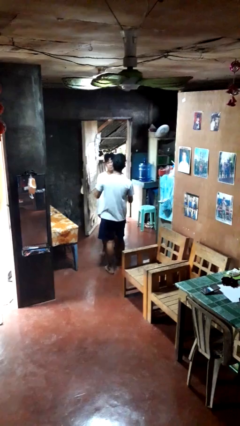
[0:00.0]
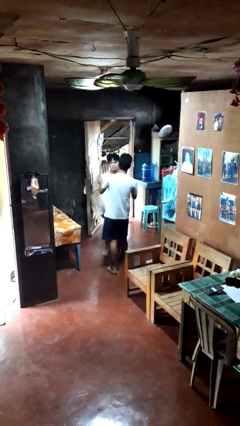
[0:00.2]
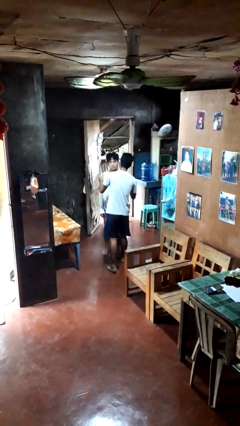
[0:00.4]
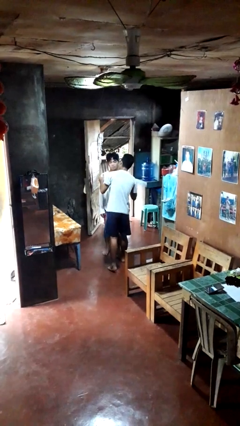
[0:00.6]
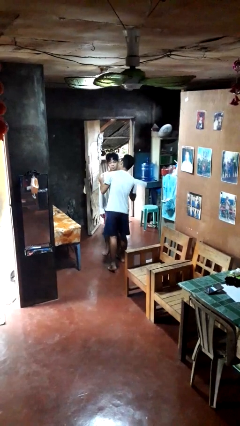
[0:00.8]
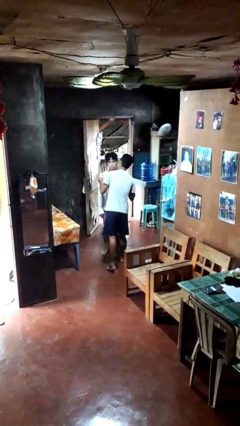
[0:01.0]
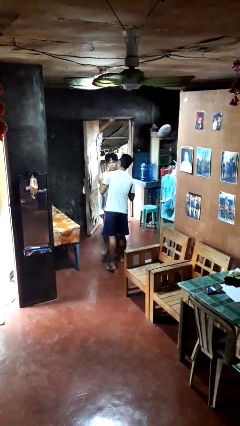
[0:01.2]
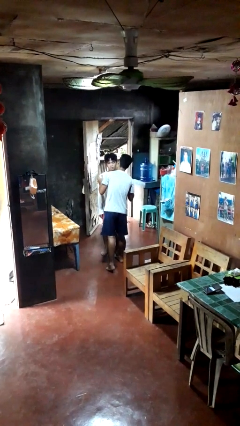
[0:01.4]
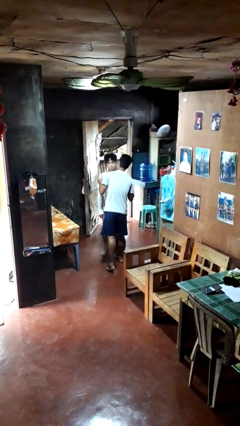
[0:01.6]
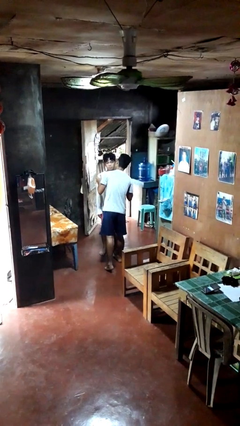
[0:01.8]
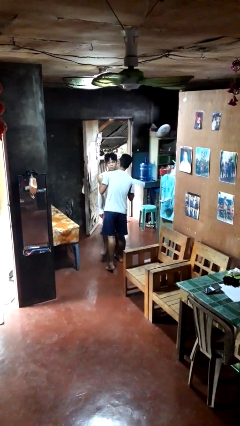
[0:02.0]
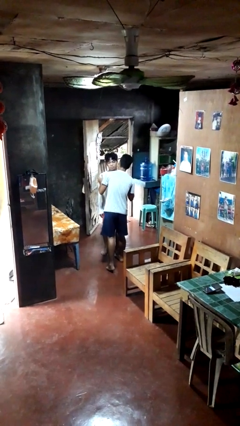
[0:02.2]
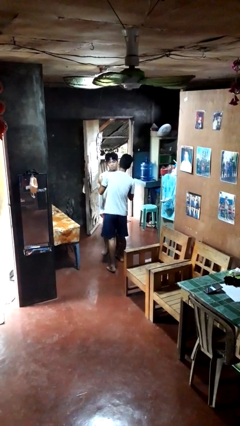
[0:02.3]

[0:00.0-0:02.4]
person kisses cheek of person

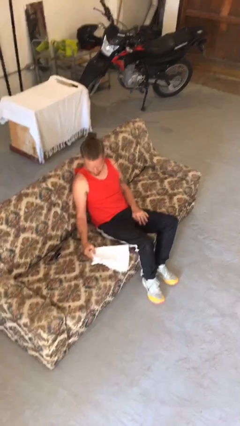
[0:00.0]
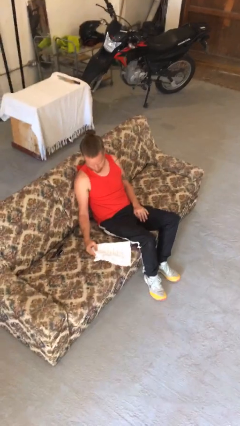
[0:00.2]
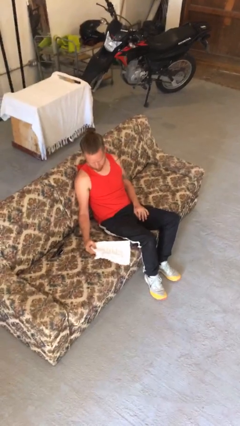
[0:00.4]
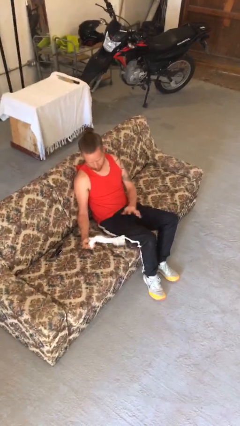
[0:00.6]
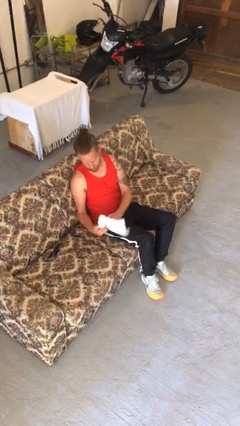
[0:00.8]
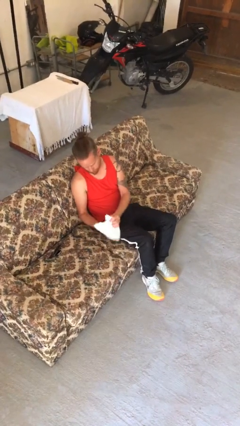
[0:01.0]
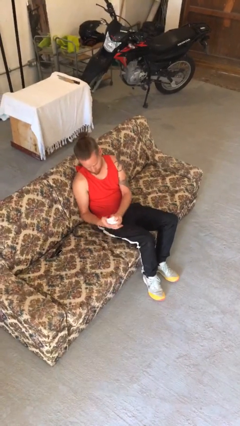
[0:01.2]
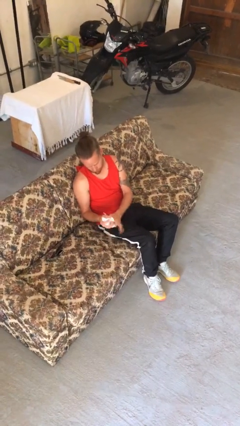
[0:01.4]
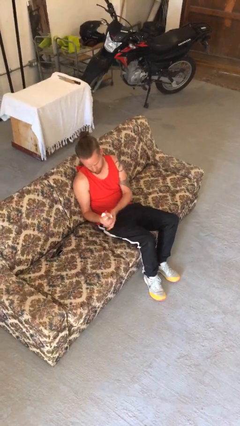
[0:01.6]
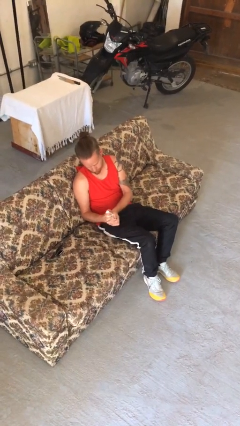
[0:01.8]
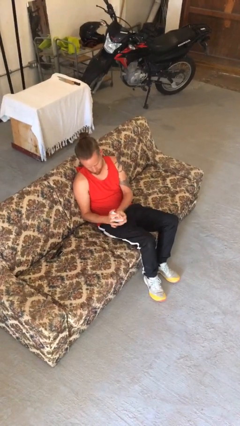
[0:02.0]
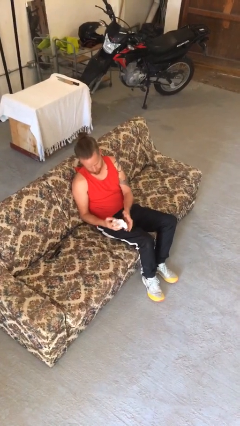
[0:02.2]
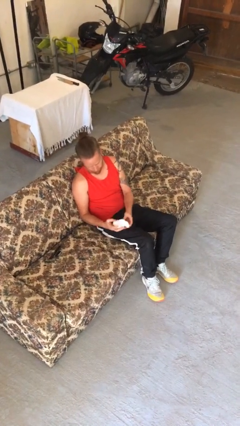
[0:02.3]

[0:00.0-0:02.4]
person crumples paper

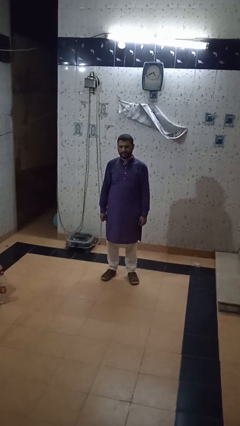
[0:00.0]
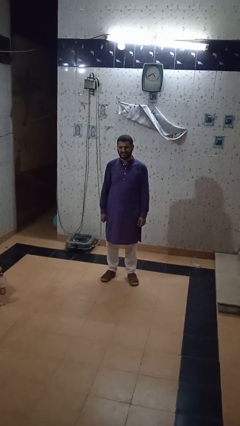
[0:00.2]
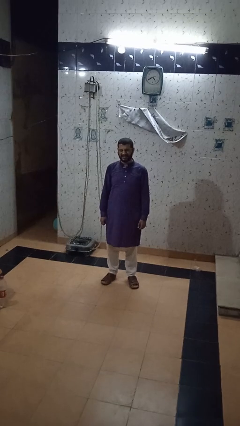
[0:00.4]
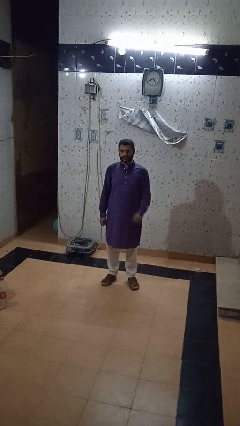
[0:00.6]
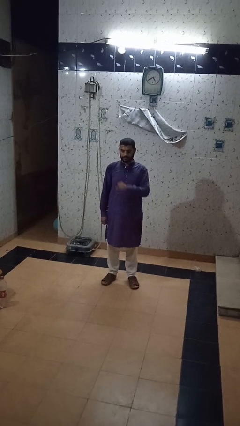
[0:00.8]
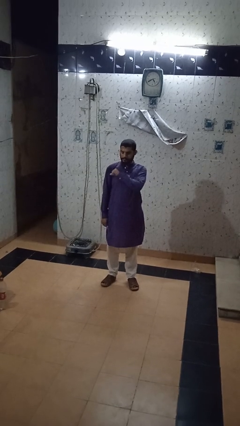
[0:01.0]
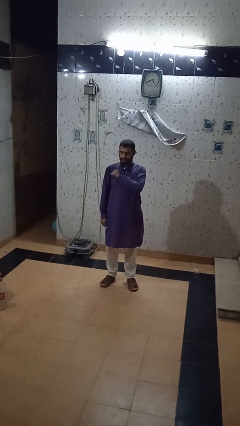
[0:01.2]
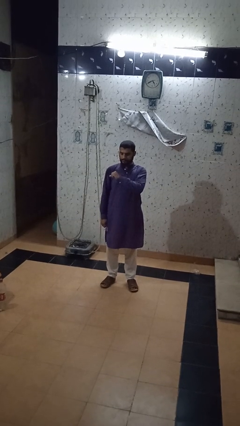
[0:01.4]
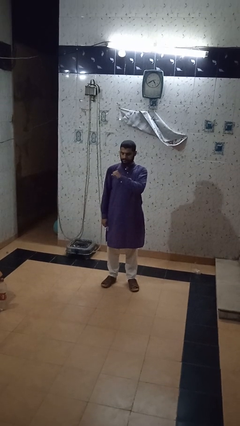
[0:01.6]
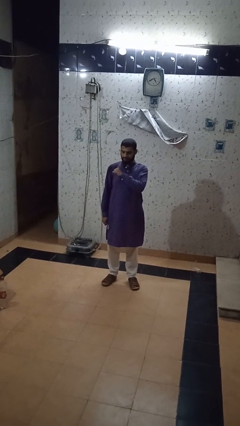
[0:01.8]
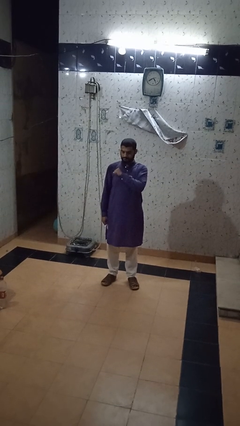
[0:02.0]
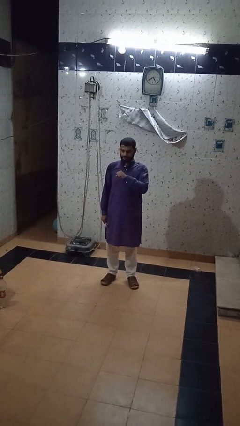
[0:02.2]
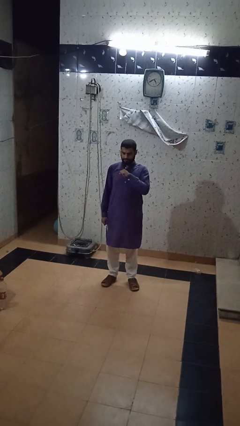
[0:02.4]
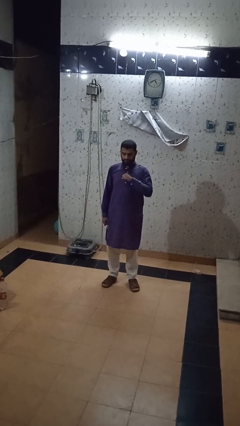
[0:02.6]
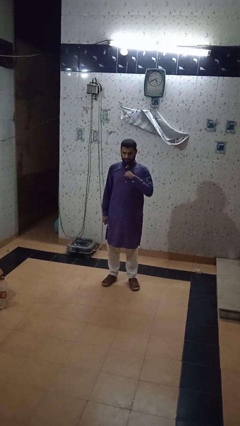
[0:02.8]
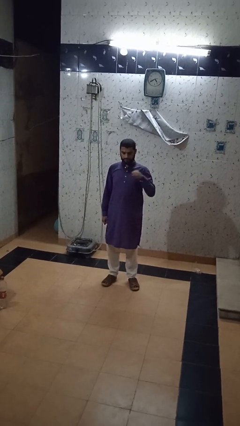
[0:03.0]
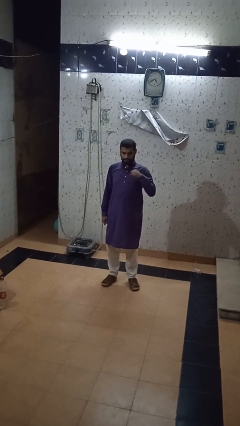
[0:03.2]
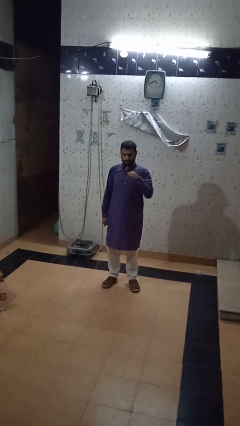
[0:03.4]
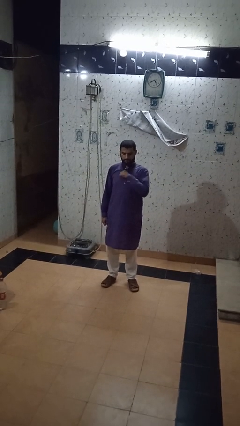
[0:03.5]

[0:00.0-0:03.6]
person drums on chest

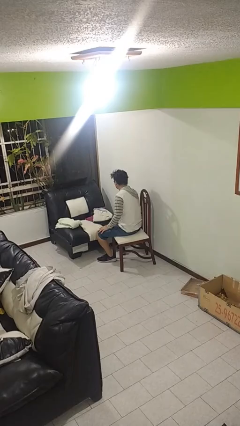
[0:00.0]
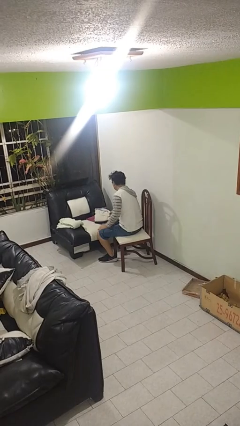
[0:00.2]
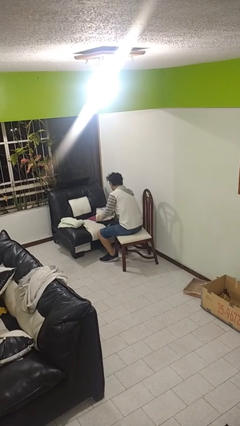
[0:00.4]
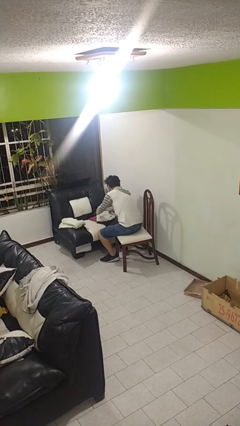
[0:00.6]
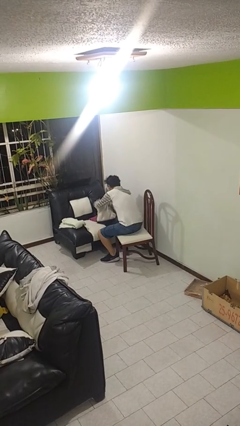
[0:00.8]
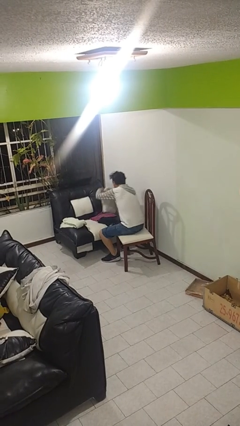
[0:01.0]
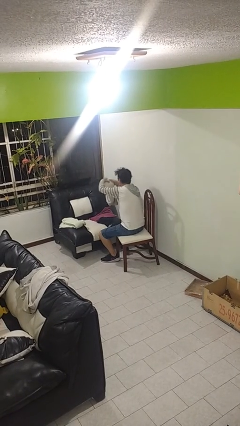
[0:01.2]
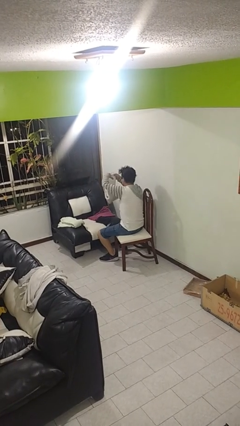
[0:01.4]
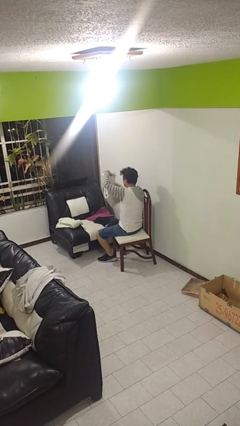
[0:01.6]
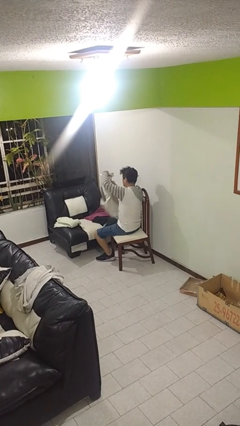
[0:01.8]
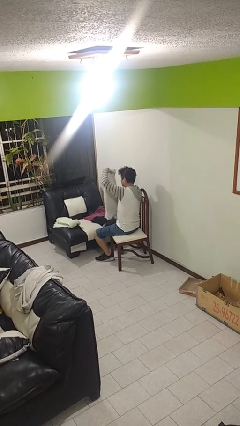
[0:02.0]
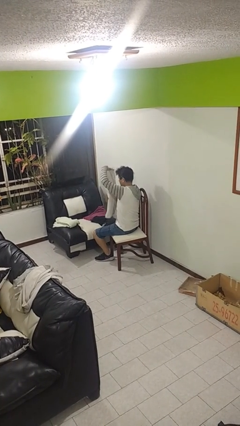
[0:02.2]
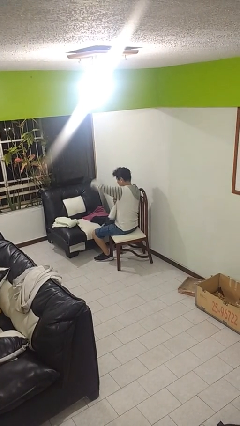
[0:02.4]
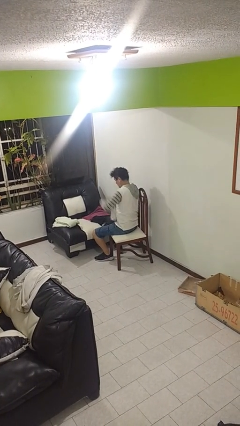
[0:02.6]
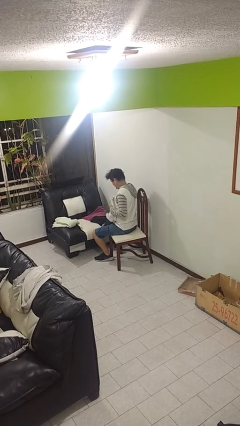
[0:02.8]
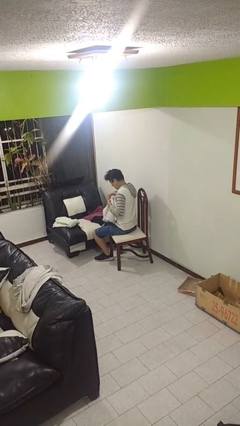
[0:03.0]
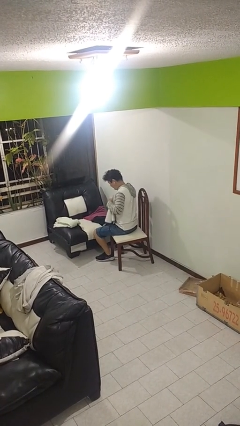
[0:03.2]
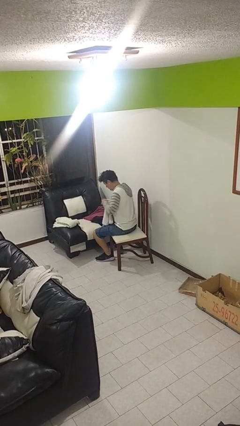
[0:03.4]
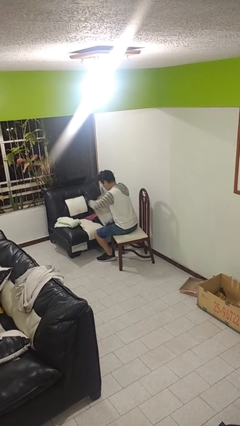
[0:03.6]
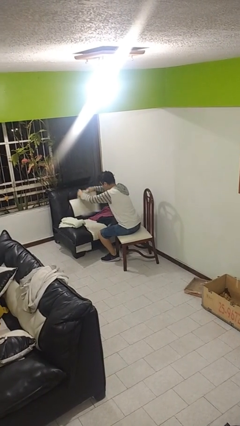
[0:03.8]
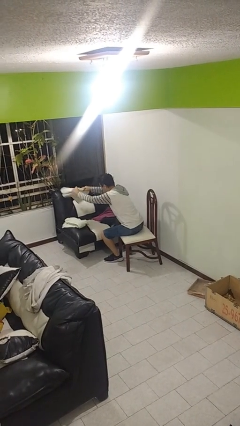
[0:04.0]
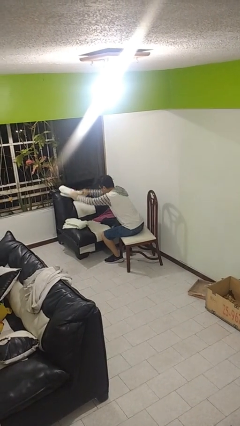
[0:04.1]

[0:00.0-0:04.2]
person folds towel

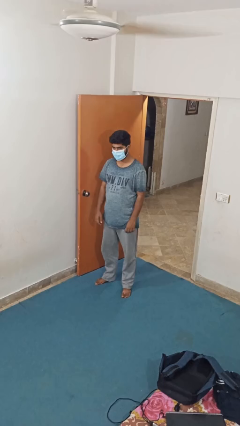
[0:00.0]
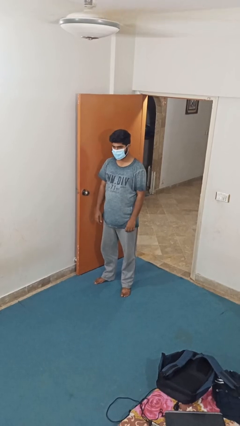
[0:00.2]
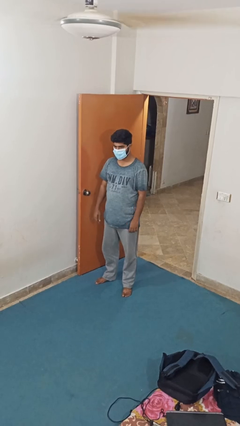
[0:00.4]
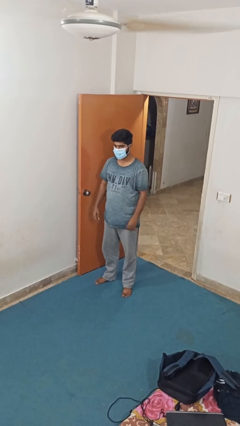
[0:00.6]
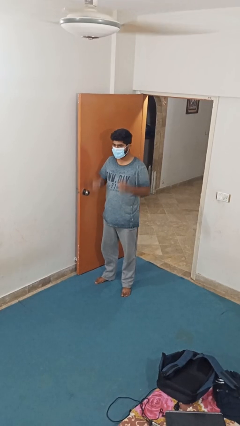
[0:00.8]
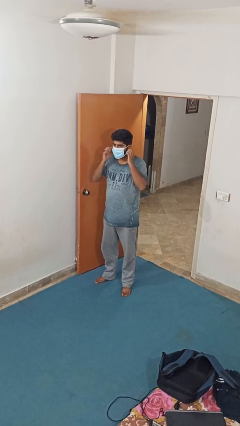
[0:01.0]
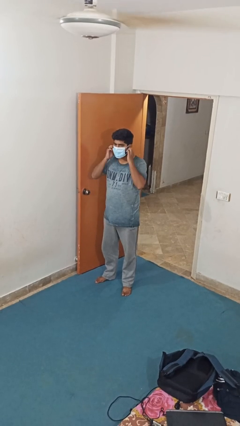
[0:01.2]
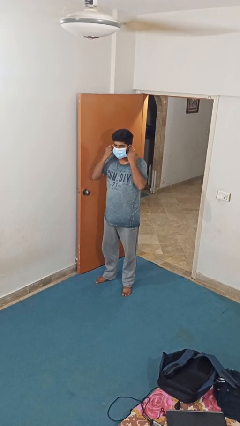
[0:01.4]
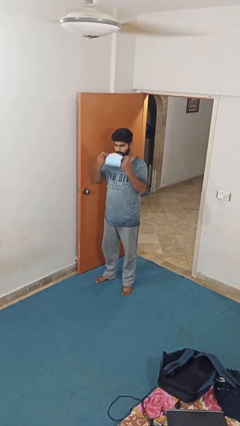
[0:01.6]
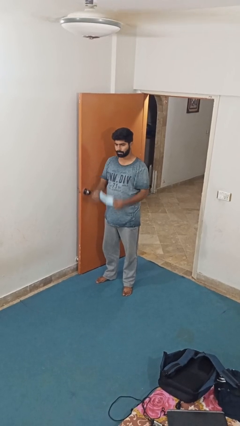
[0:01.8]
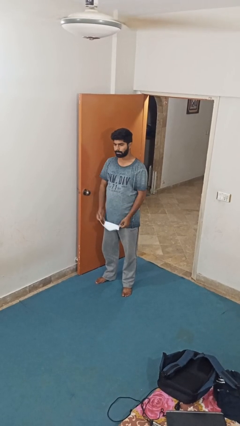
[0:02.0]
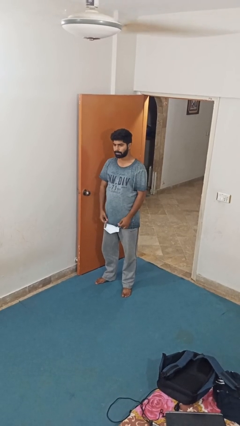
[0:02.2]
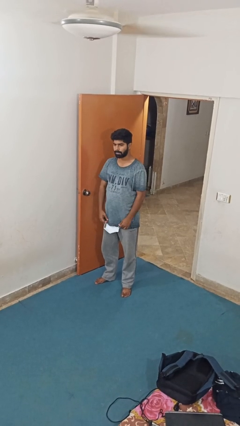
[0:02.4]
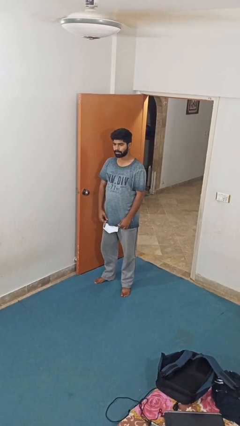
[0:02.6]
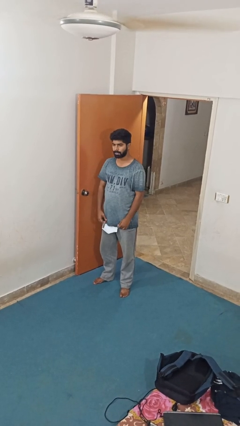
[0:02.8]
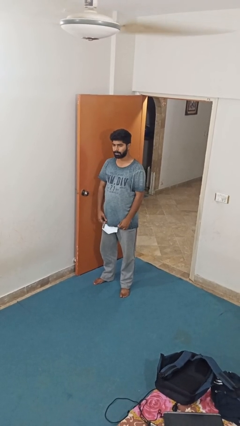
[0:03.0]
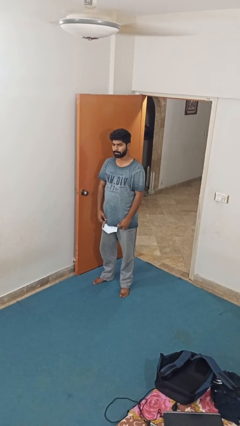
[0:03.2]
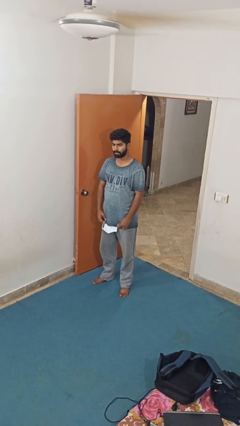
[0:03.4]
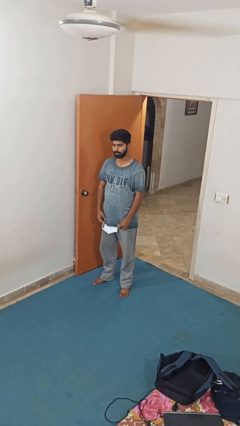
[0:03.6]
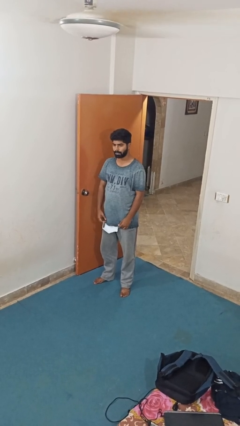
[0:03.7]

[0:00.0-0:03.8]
person takes off facemask

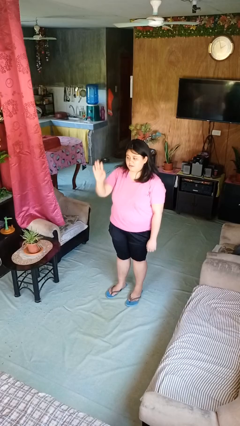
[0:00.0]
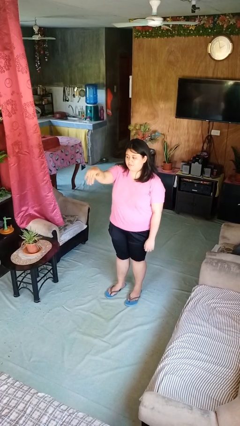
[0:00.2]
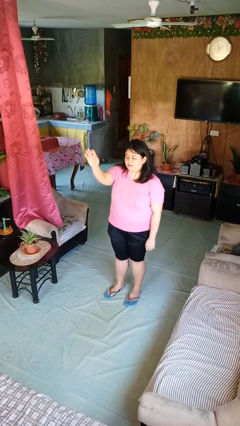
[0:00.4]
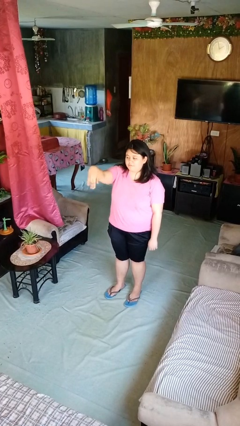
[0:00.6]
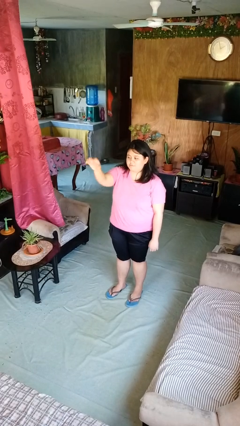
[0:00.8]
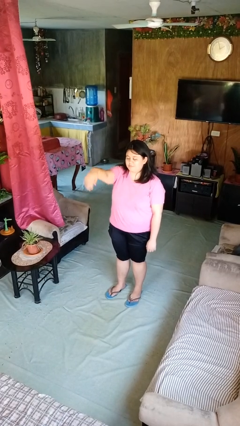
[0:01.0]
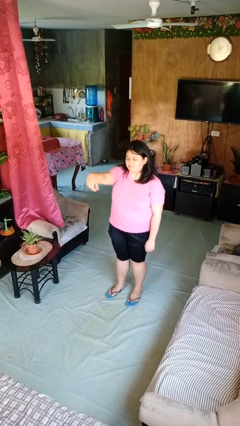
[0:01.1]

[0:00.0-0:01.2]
person gestures come here
